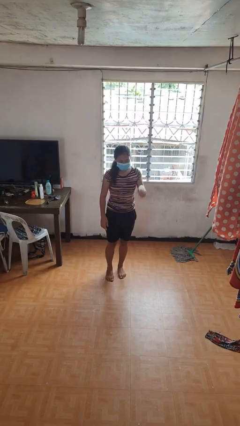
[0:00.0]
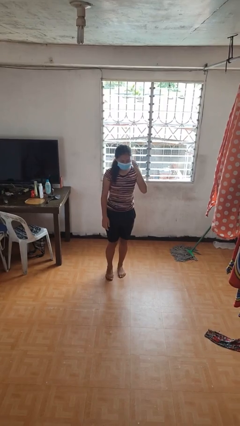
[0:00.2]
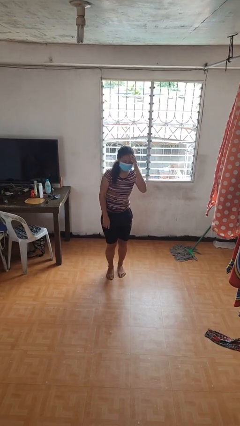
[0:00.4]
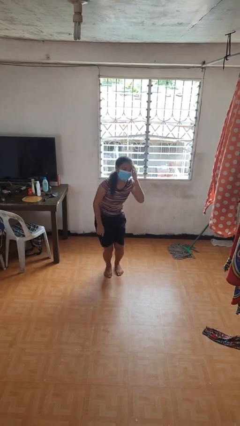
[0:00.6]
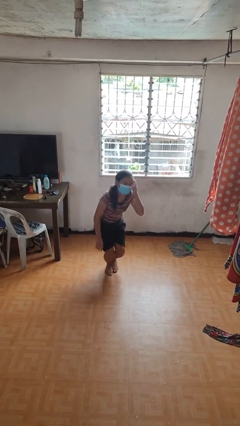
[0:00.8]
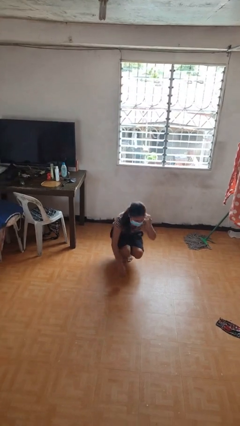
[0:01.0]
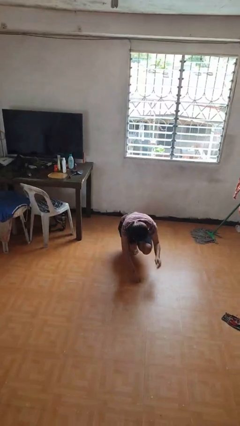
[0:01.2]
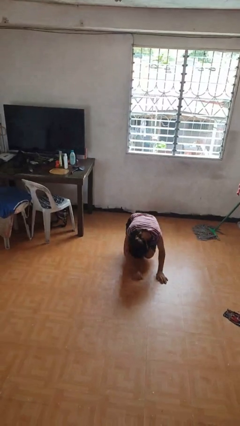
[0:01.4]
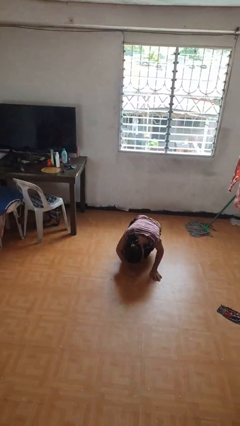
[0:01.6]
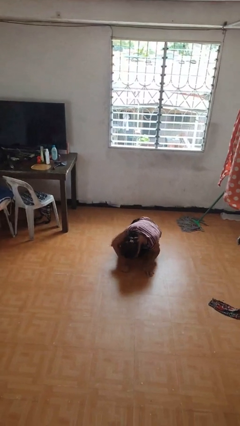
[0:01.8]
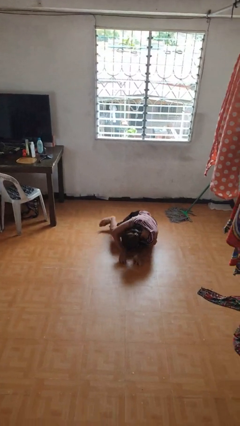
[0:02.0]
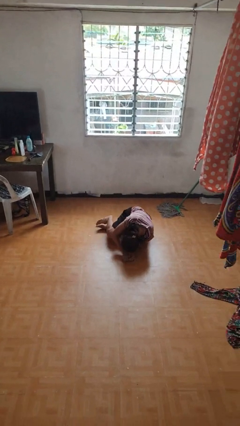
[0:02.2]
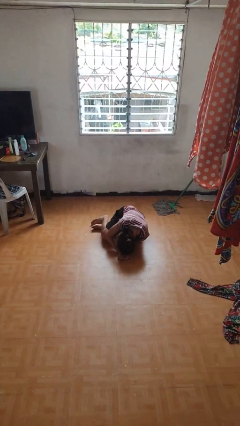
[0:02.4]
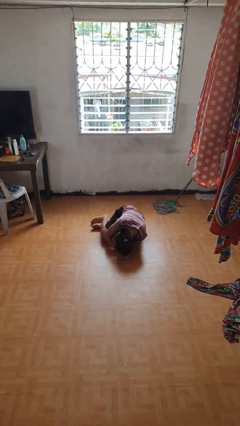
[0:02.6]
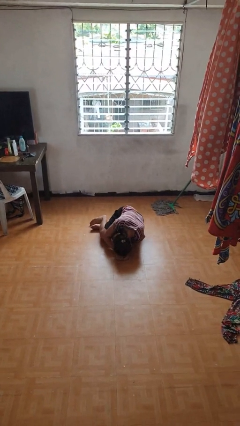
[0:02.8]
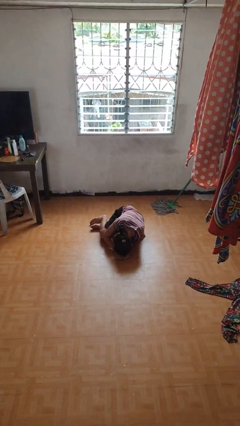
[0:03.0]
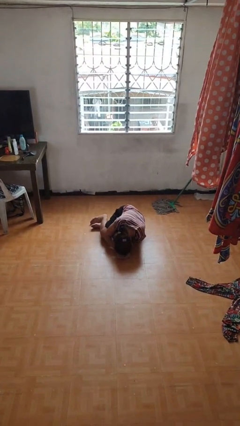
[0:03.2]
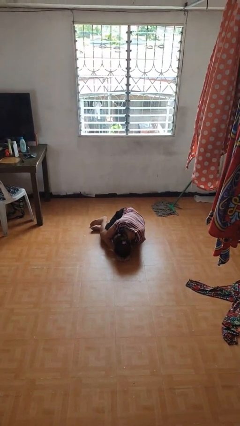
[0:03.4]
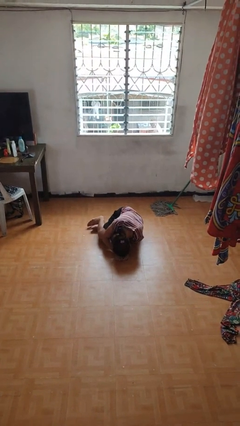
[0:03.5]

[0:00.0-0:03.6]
person falls while standing

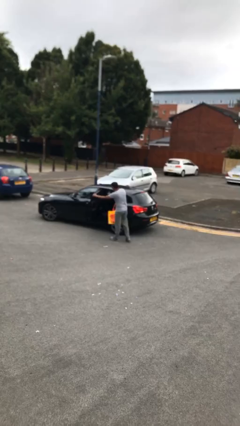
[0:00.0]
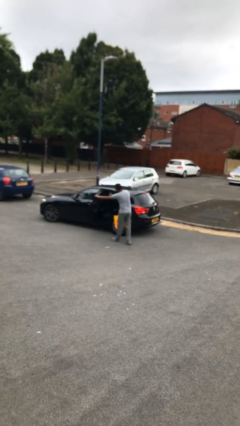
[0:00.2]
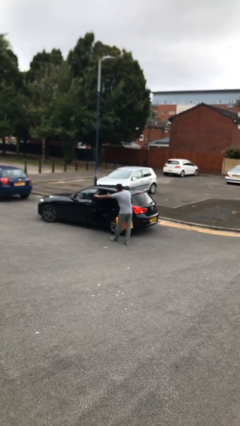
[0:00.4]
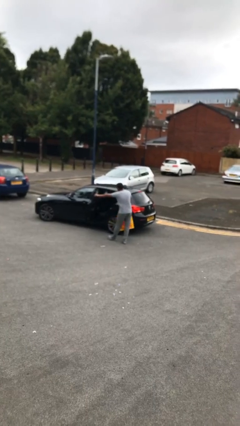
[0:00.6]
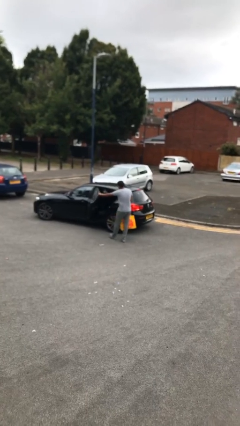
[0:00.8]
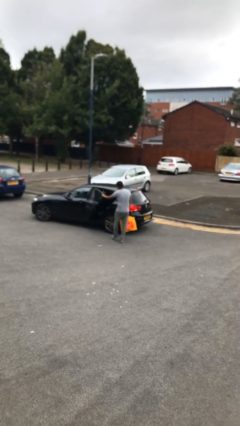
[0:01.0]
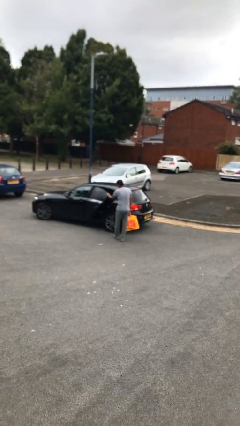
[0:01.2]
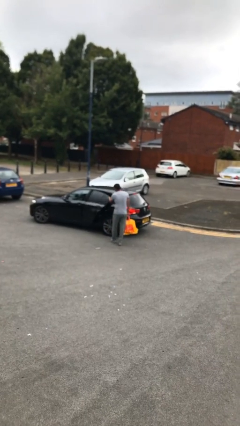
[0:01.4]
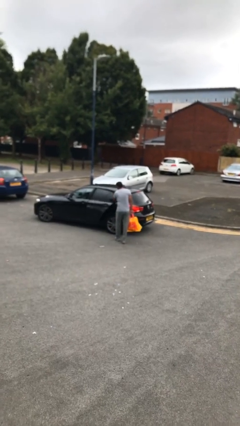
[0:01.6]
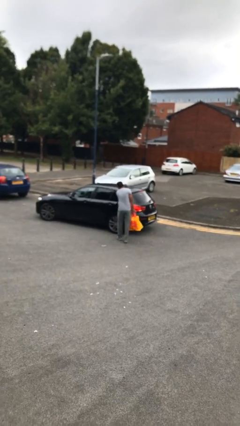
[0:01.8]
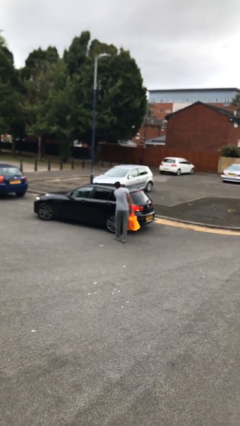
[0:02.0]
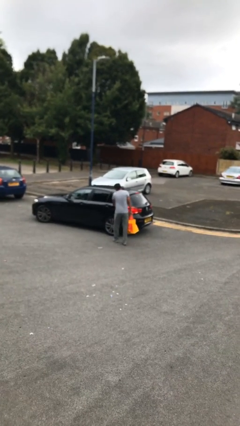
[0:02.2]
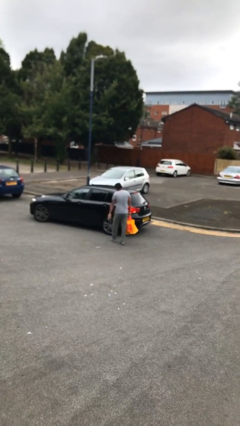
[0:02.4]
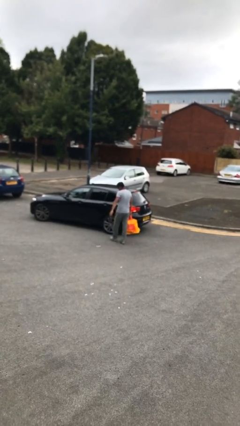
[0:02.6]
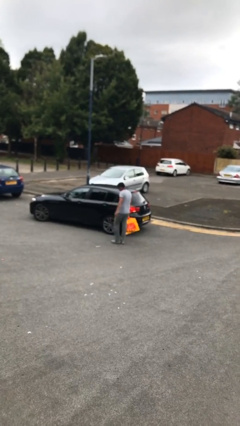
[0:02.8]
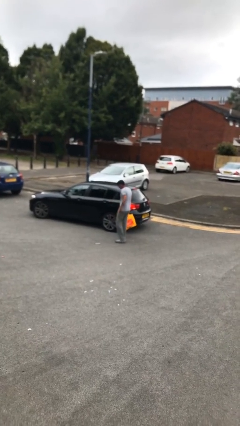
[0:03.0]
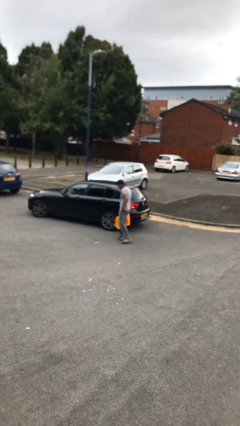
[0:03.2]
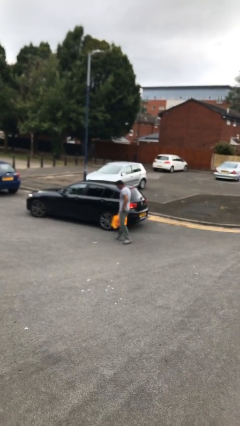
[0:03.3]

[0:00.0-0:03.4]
person closes car door

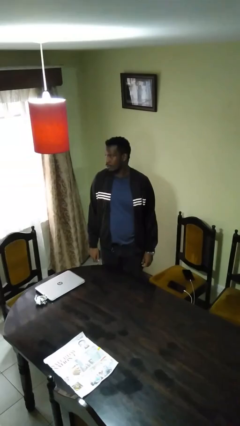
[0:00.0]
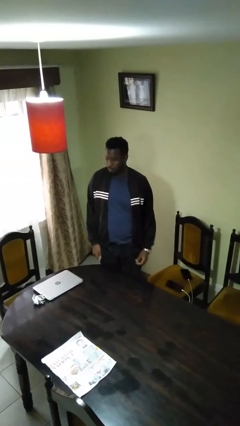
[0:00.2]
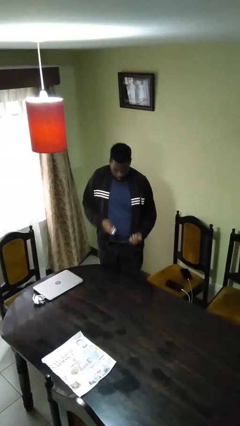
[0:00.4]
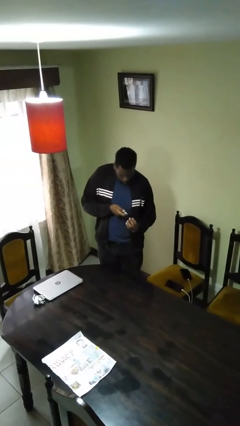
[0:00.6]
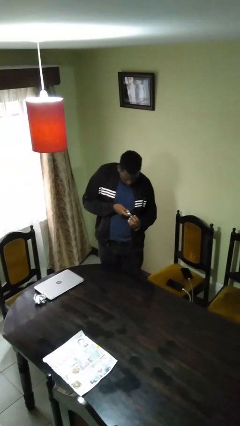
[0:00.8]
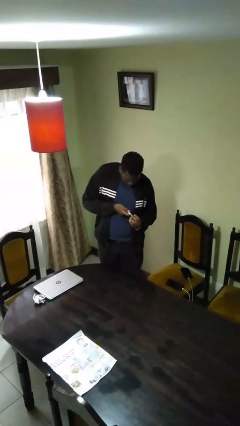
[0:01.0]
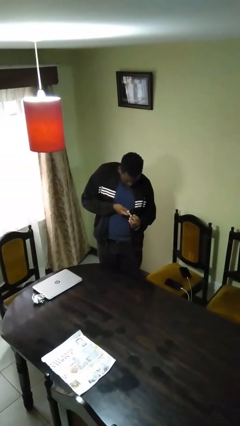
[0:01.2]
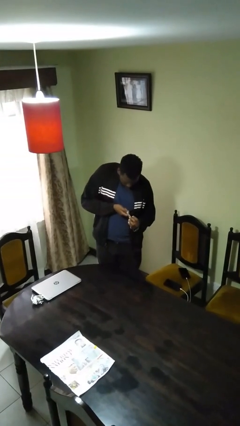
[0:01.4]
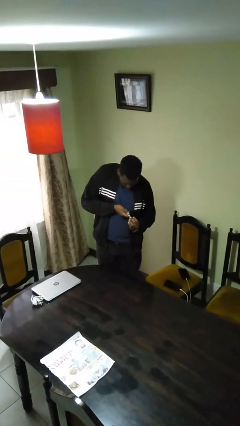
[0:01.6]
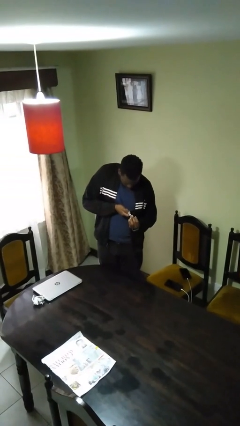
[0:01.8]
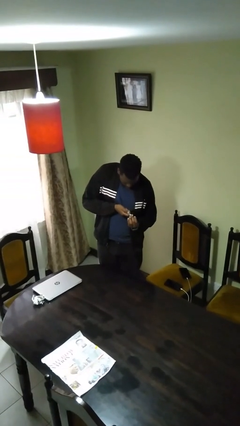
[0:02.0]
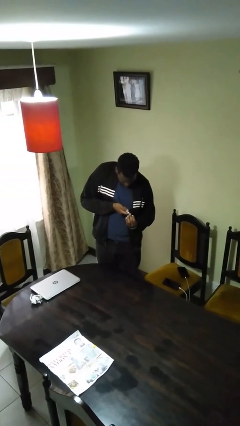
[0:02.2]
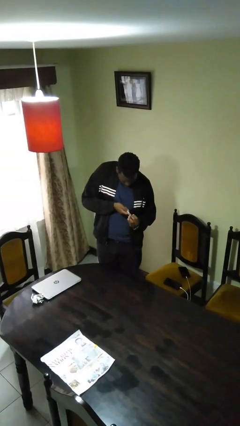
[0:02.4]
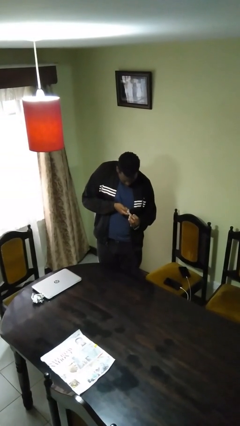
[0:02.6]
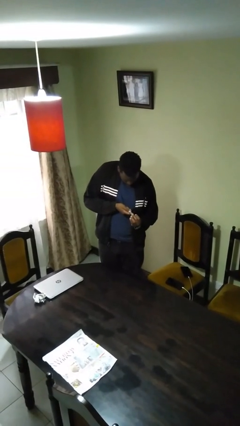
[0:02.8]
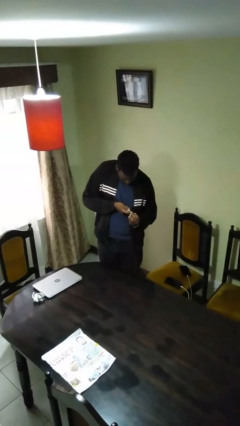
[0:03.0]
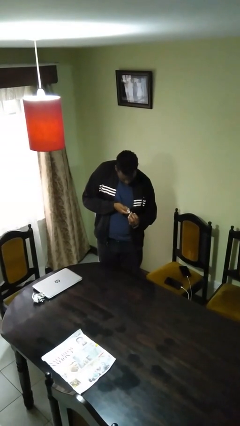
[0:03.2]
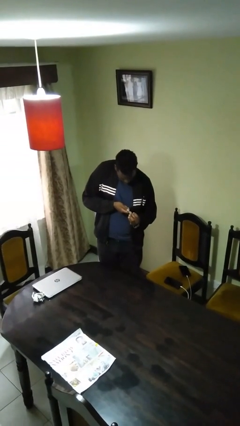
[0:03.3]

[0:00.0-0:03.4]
person clips fingernails

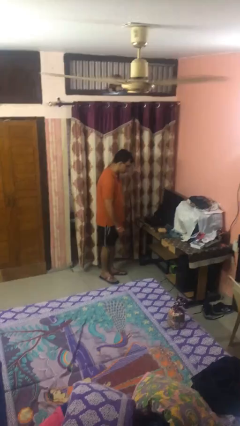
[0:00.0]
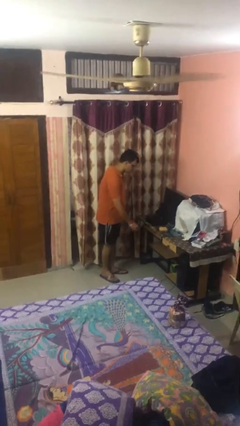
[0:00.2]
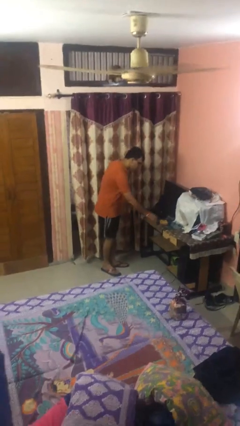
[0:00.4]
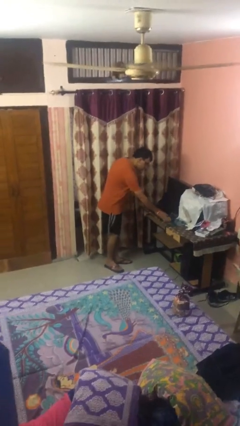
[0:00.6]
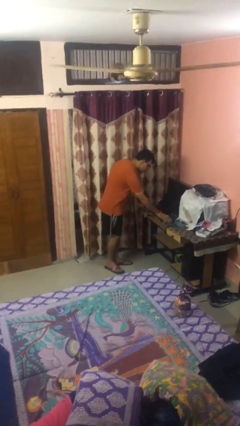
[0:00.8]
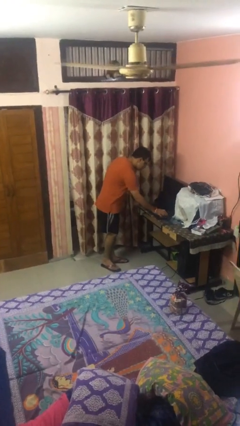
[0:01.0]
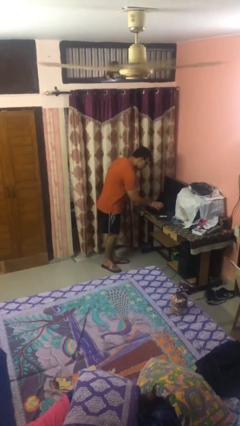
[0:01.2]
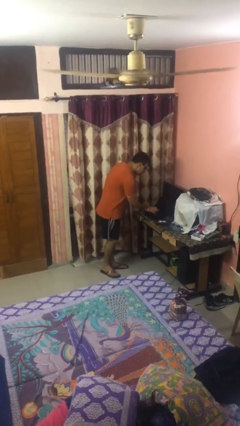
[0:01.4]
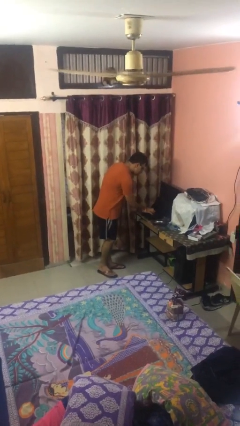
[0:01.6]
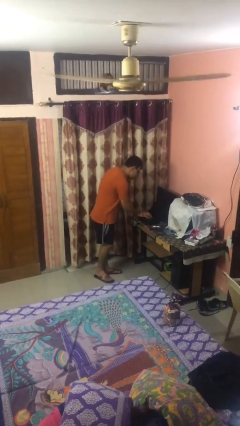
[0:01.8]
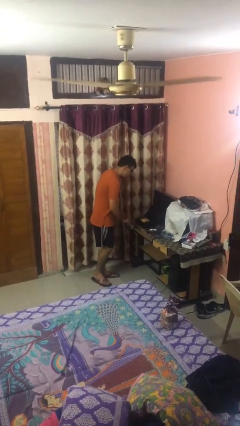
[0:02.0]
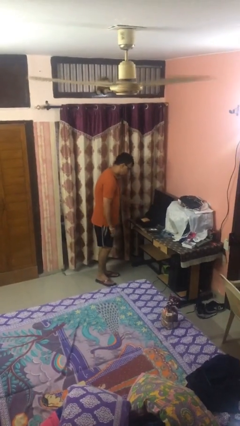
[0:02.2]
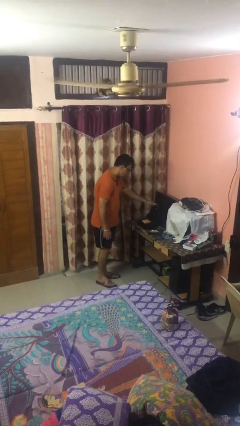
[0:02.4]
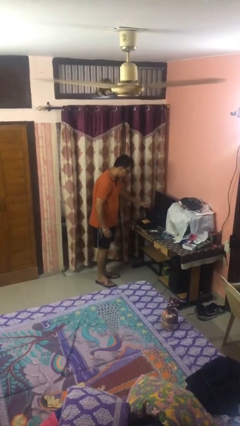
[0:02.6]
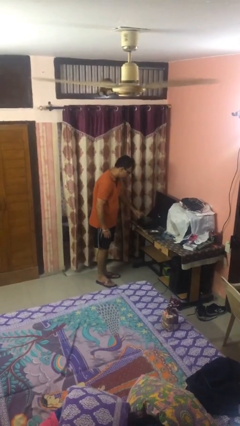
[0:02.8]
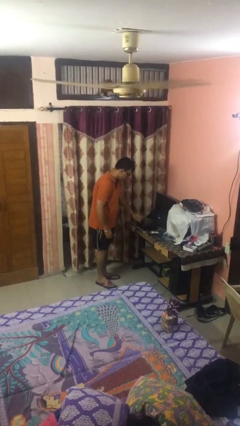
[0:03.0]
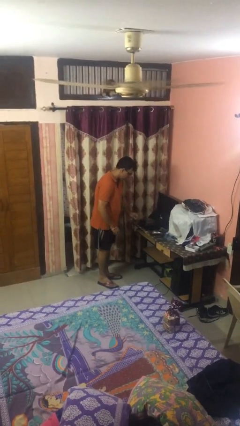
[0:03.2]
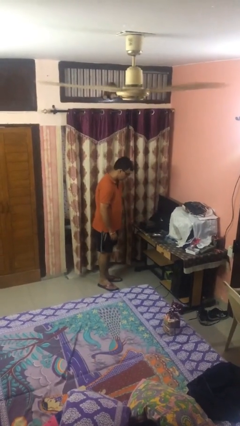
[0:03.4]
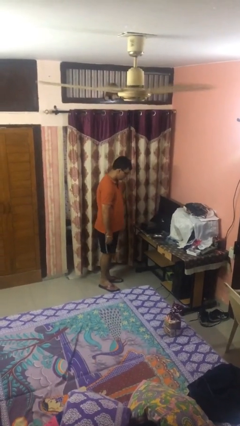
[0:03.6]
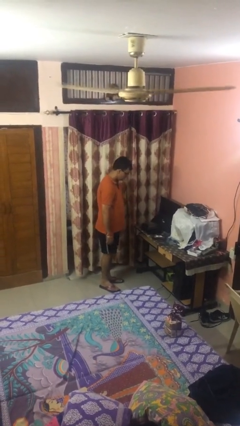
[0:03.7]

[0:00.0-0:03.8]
person puts object into toaster

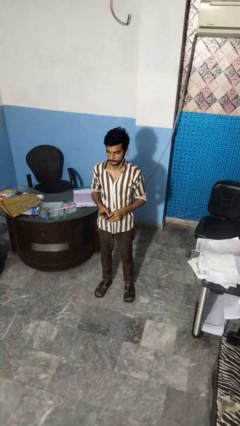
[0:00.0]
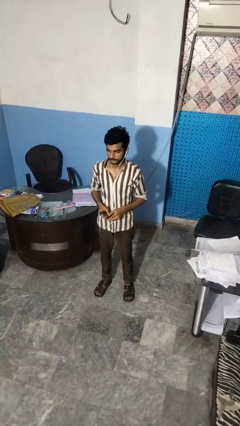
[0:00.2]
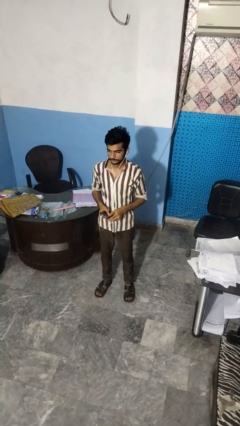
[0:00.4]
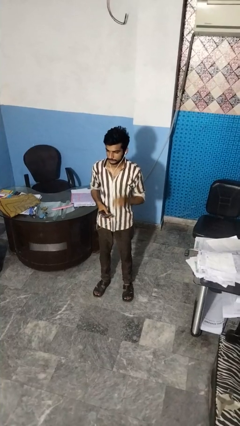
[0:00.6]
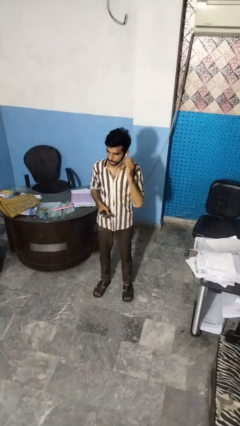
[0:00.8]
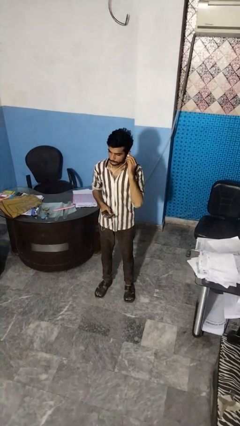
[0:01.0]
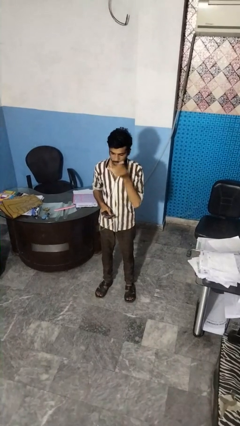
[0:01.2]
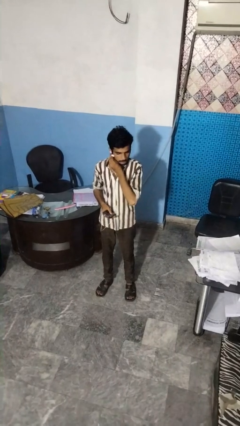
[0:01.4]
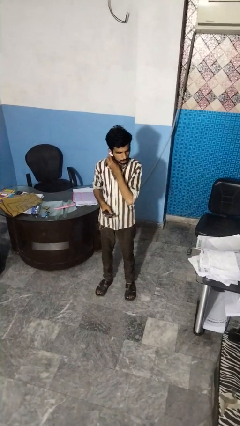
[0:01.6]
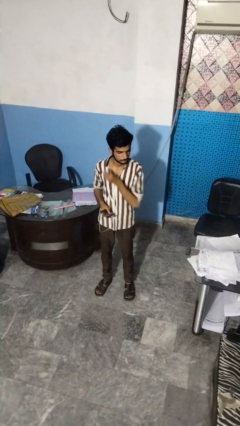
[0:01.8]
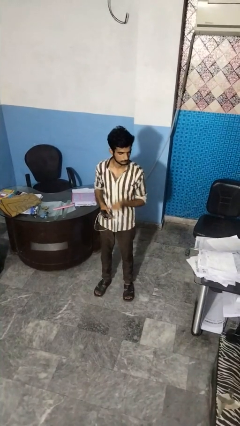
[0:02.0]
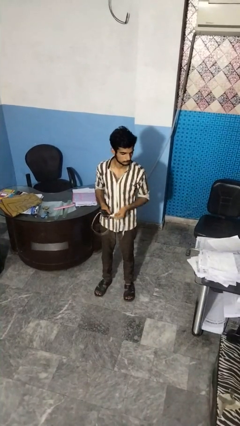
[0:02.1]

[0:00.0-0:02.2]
person takes off headphones

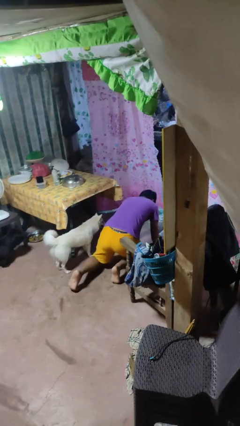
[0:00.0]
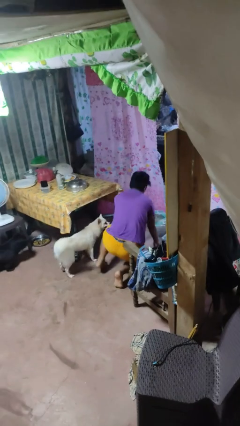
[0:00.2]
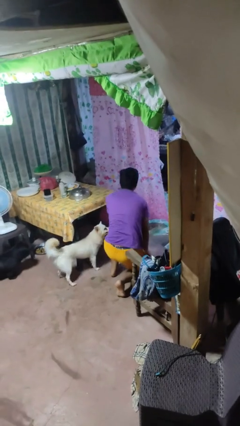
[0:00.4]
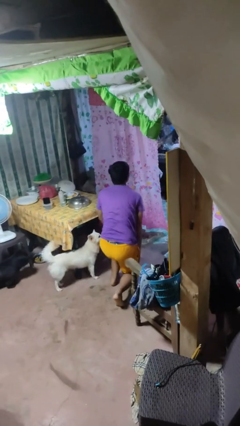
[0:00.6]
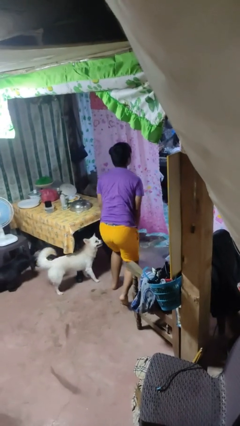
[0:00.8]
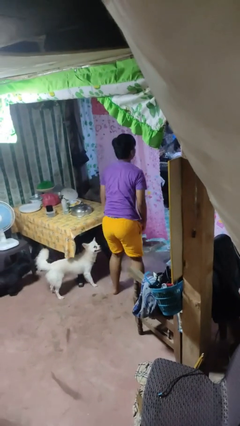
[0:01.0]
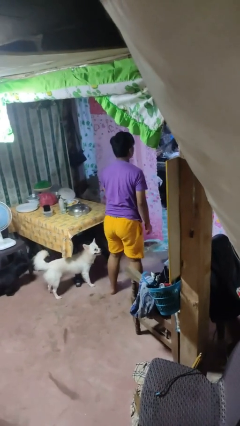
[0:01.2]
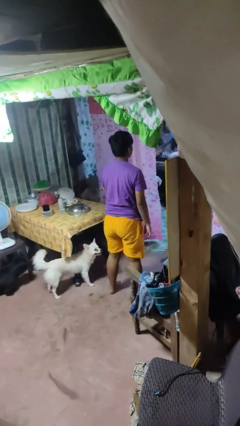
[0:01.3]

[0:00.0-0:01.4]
person stands up from floor
